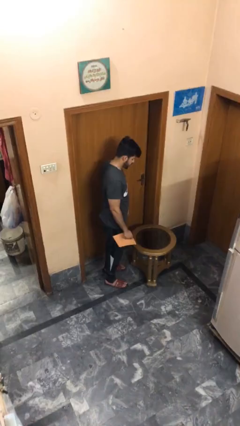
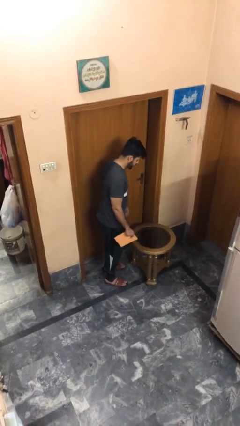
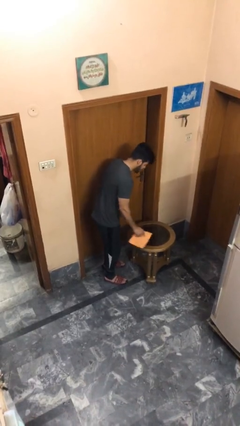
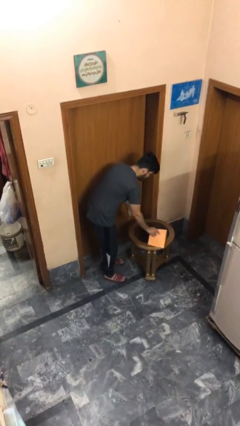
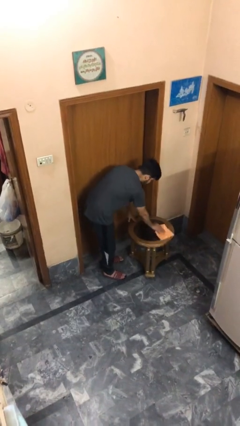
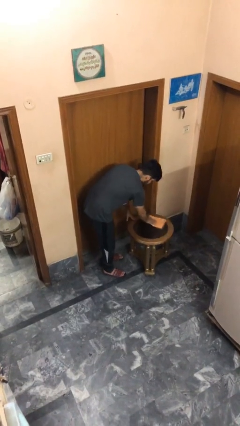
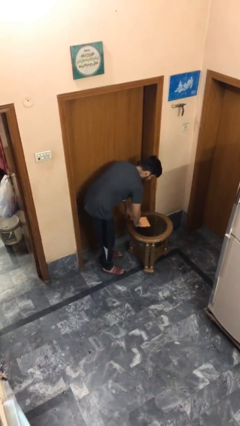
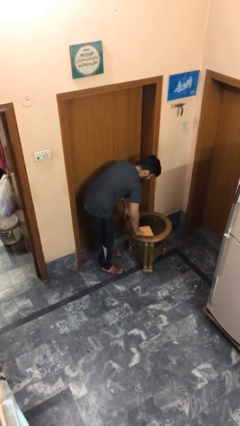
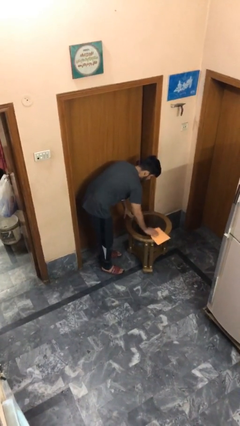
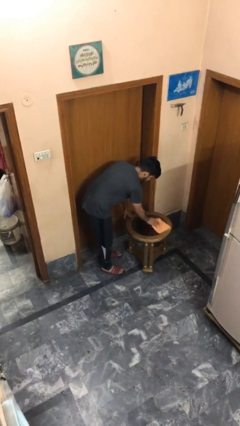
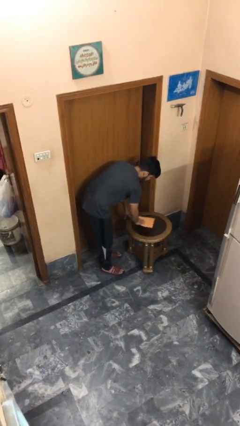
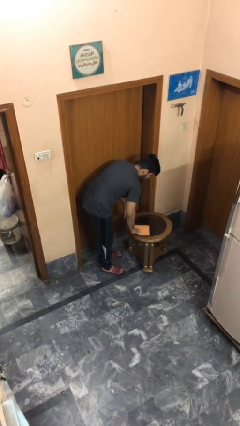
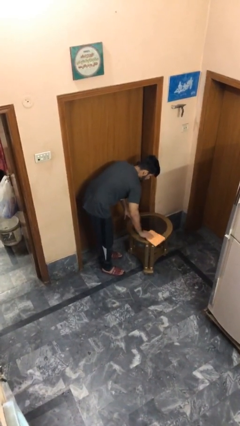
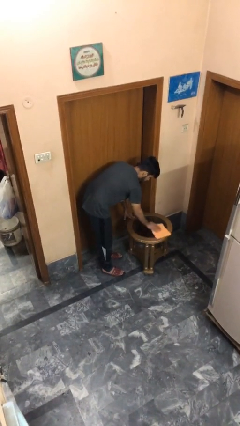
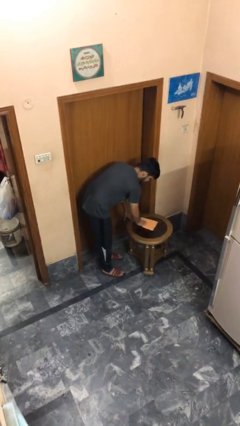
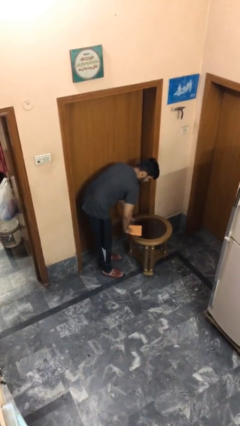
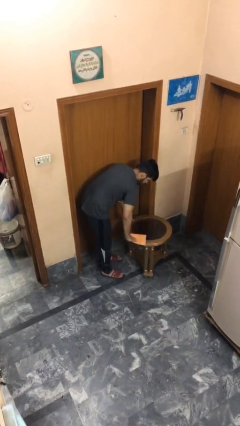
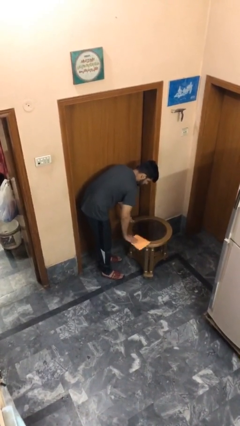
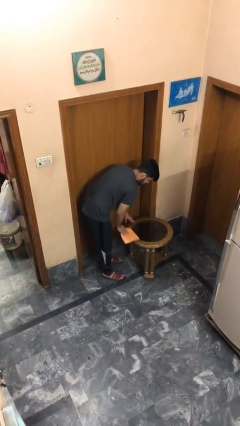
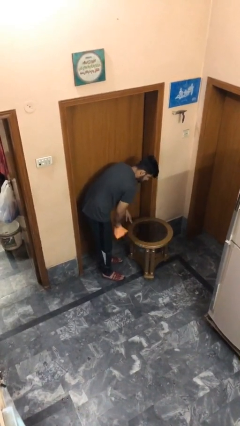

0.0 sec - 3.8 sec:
person cleans table with rag

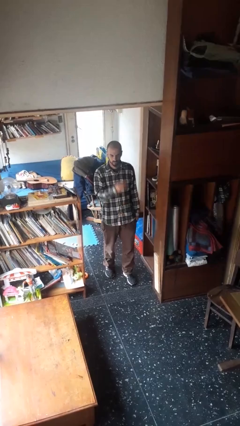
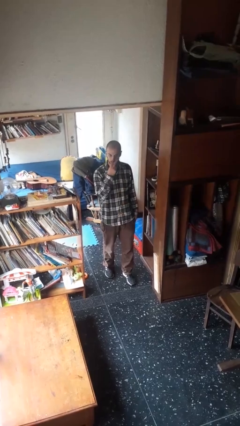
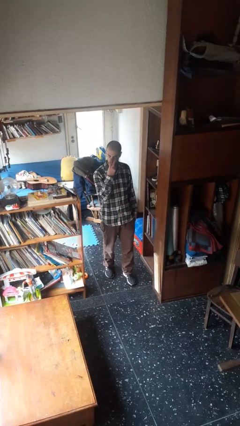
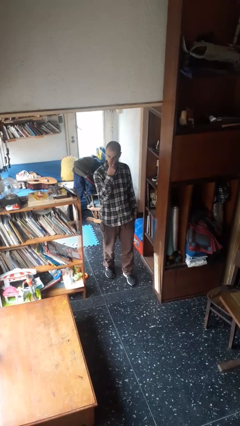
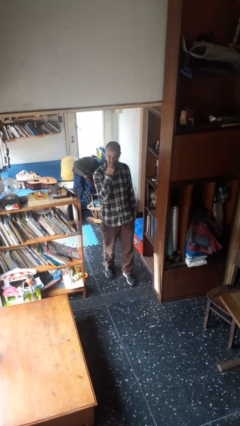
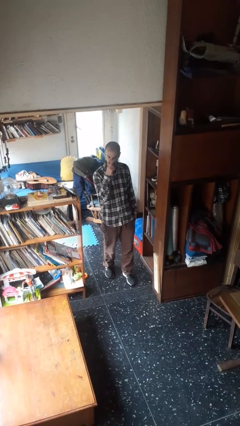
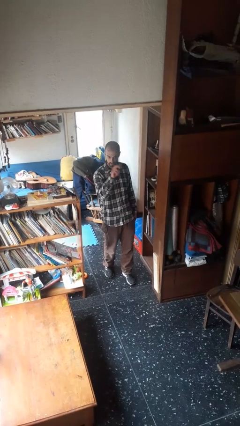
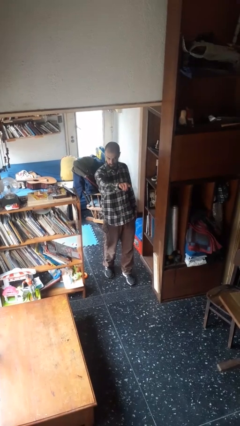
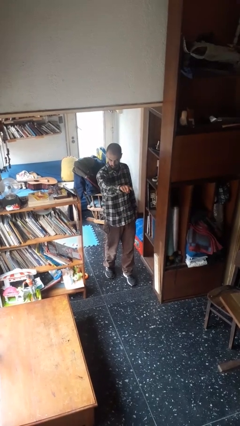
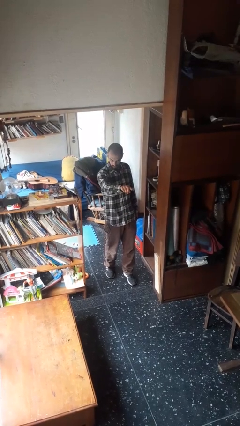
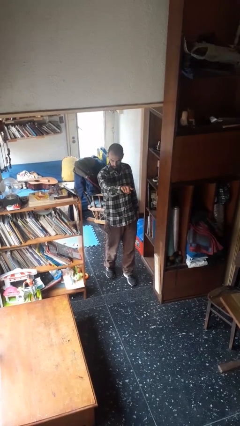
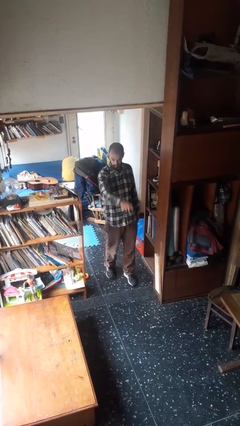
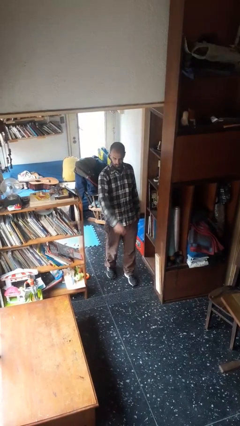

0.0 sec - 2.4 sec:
person gestures watch closely

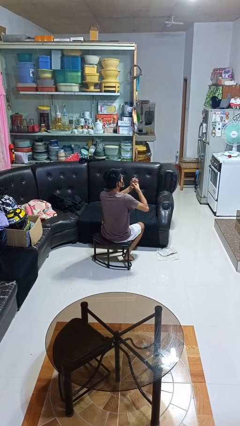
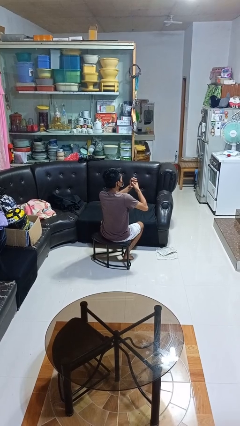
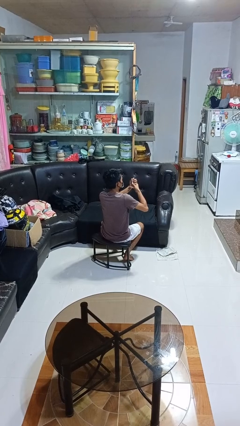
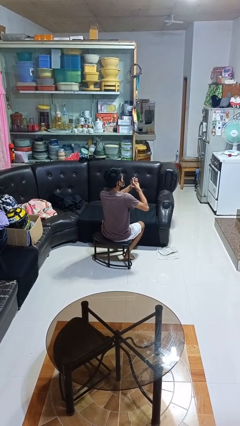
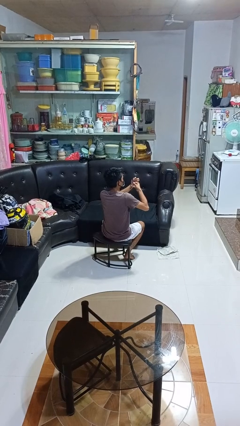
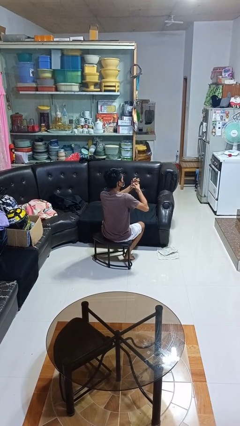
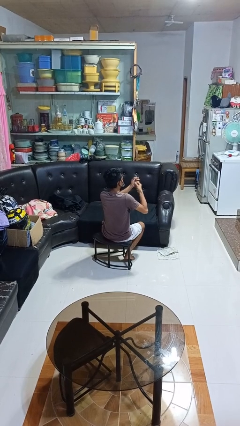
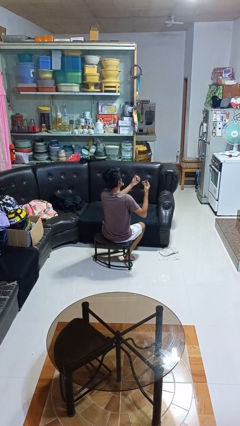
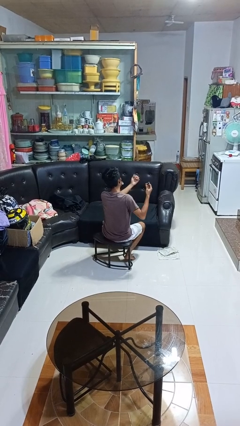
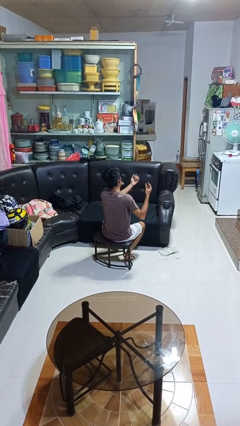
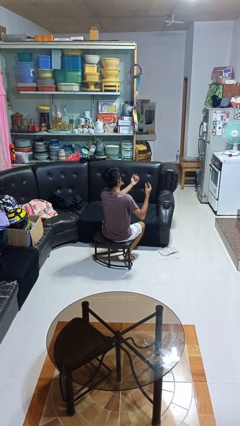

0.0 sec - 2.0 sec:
person clips fingernails

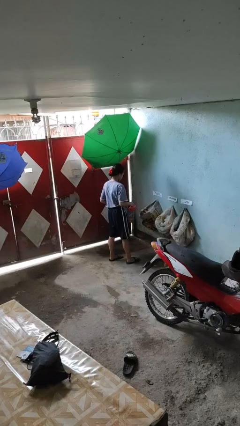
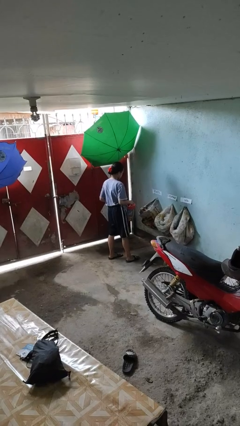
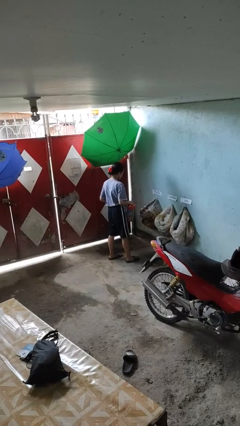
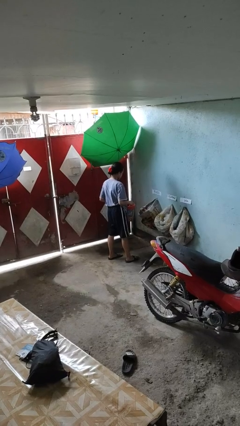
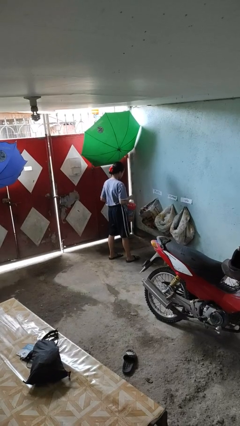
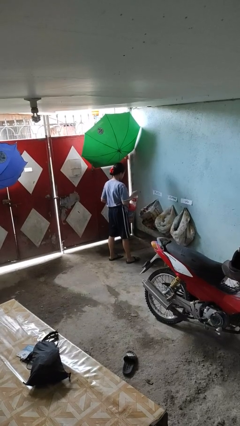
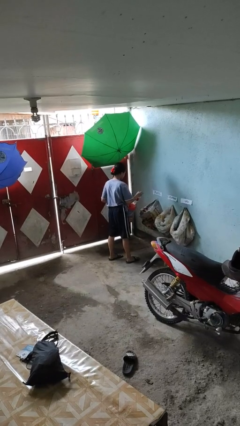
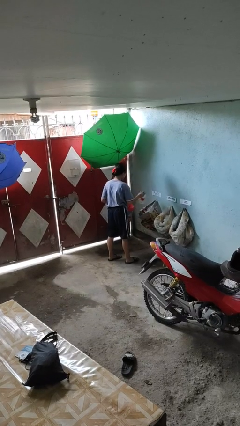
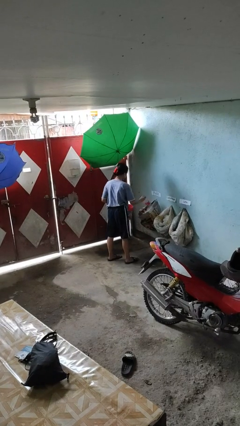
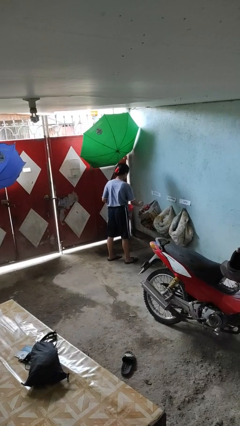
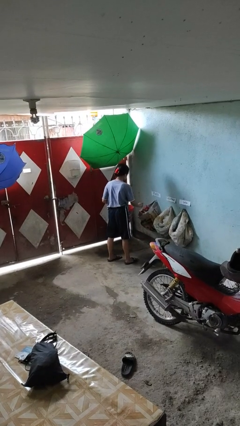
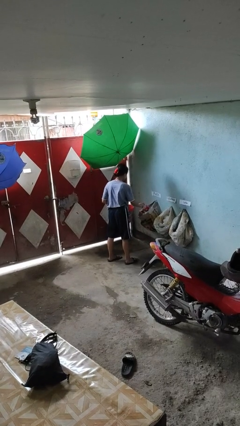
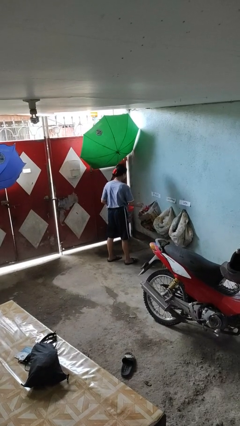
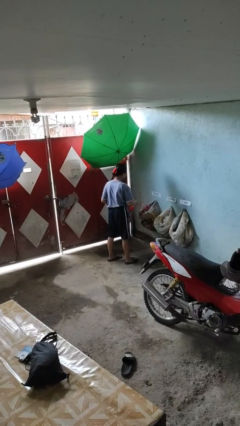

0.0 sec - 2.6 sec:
person discards trash

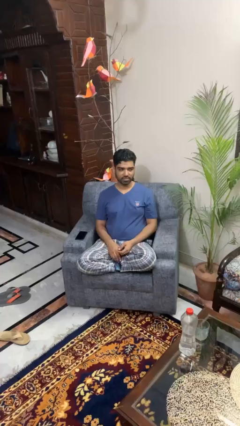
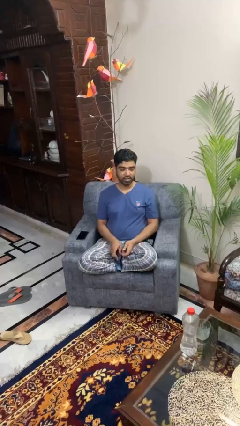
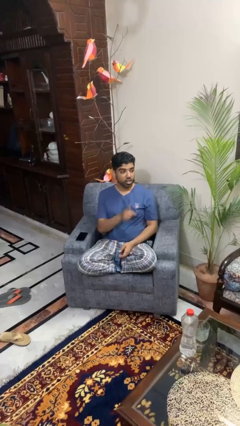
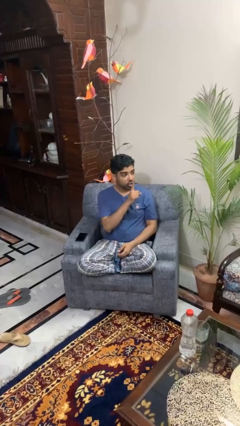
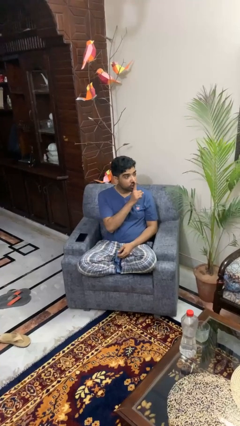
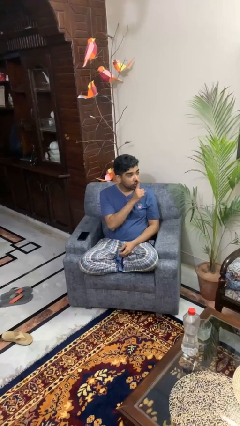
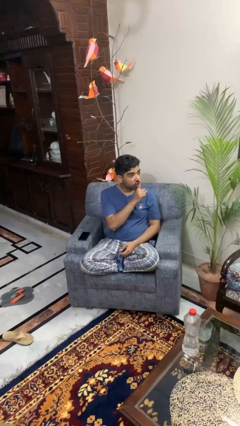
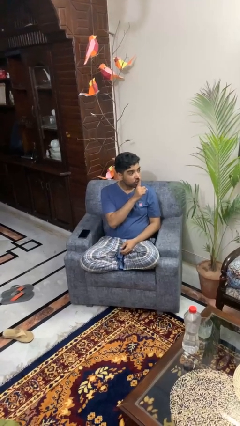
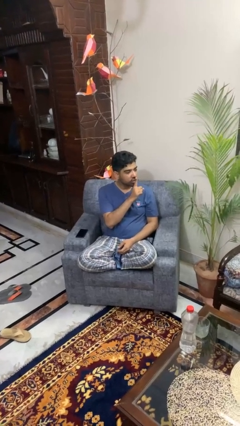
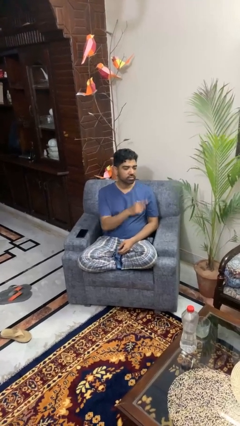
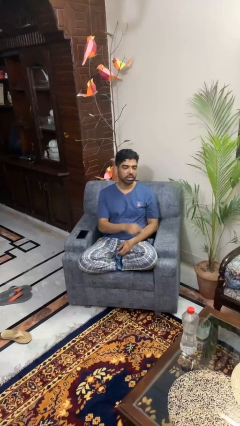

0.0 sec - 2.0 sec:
person gestures be quiet

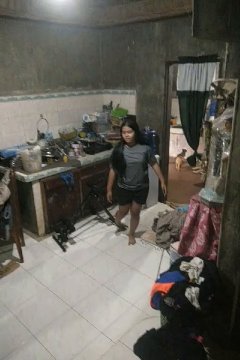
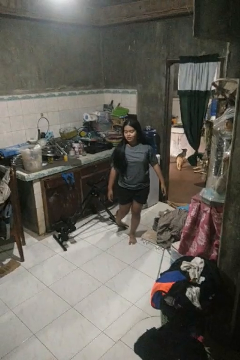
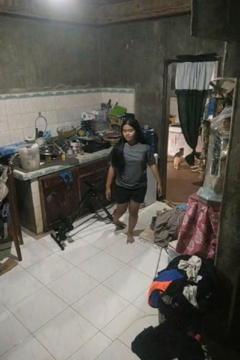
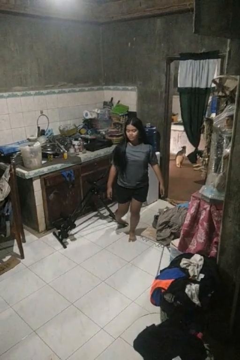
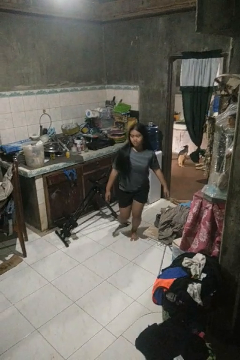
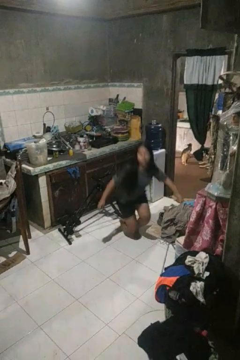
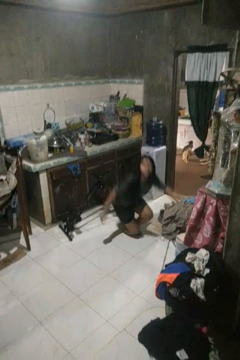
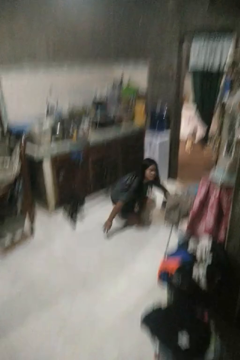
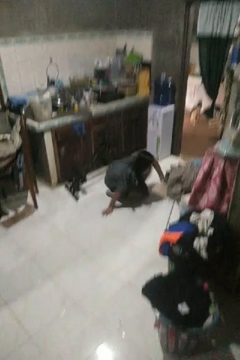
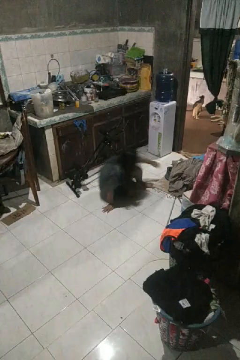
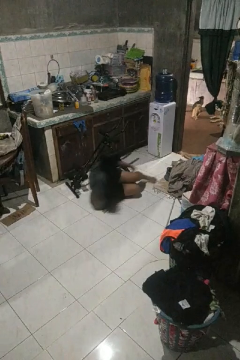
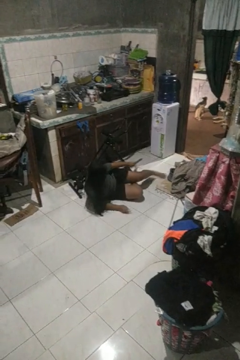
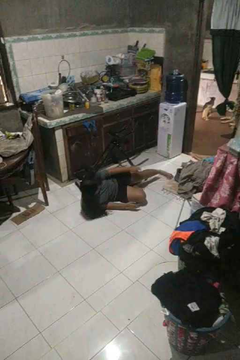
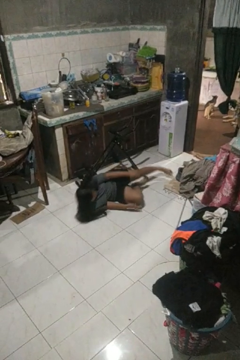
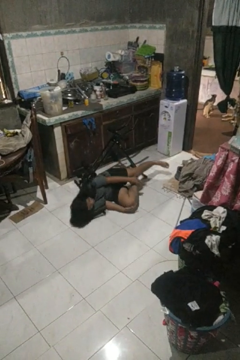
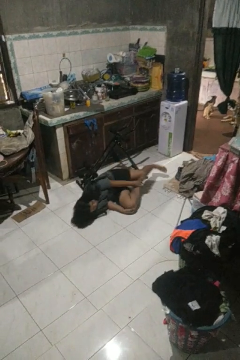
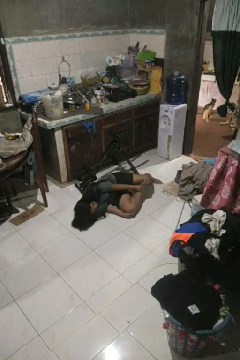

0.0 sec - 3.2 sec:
person lies down on floor

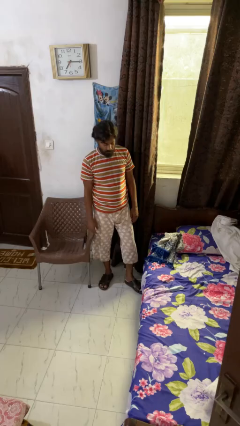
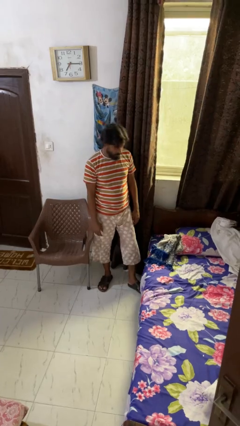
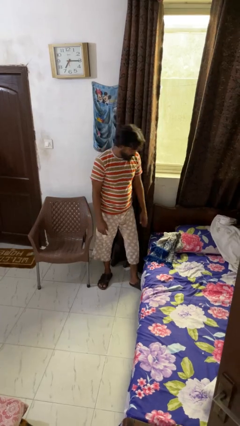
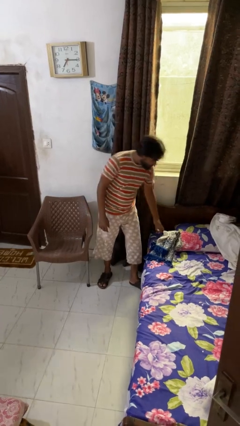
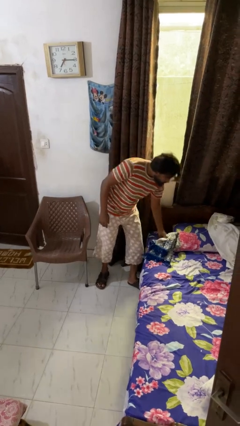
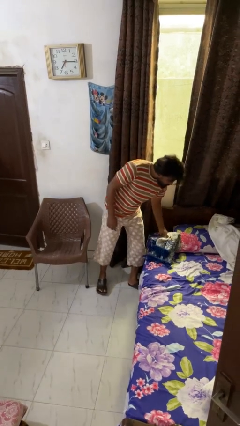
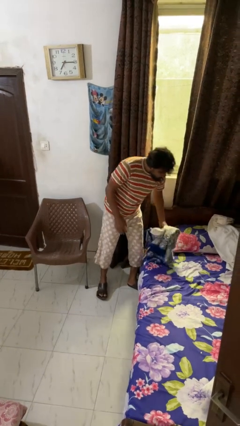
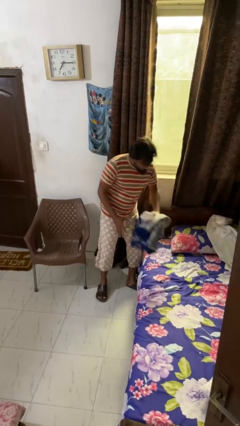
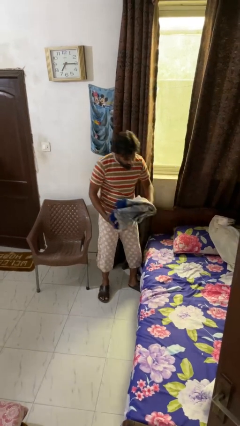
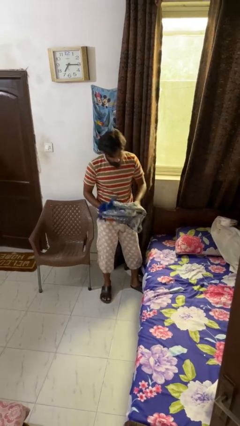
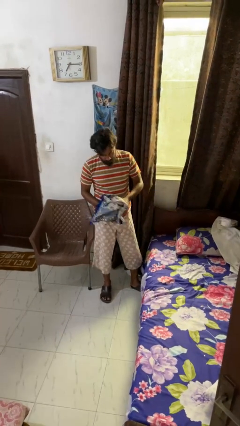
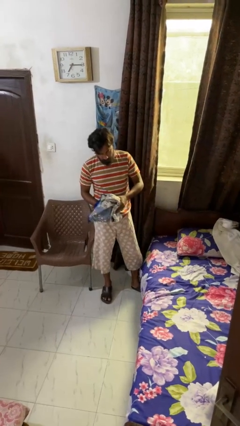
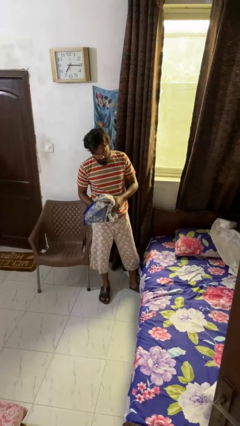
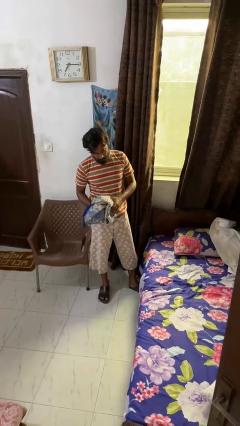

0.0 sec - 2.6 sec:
person picks up object from bed
